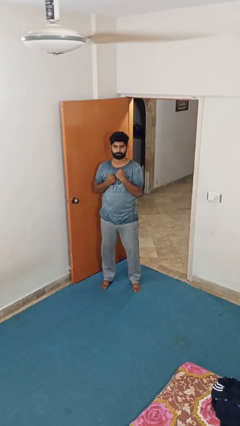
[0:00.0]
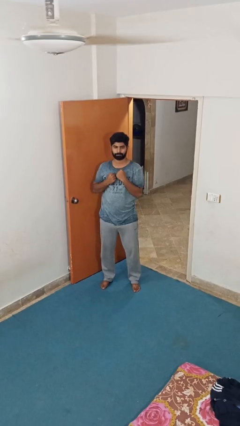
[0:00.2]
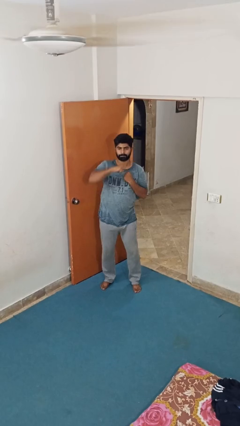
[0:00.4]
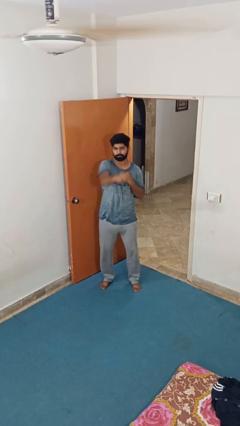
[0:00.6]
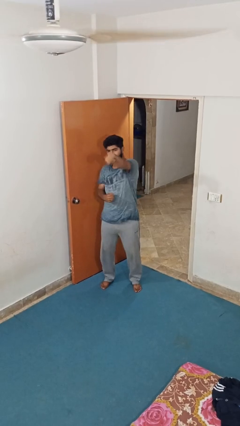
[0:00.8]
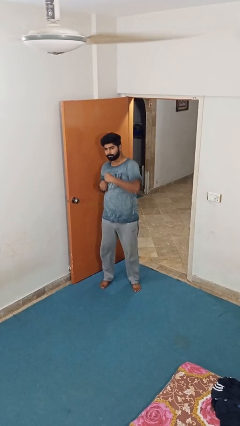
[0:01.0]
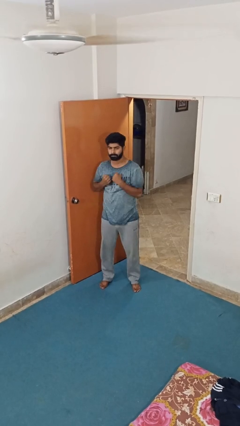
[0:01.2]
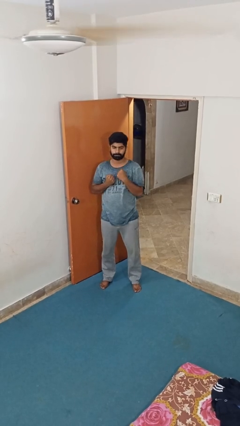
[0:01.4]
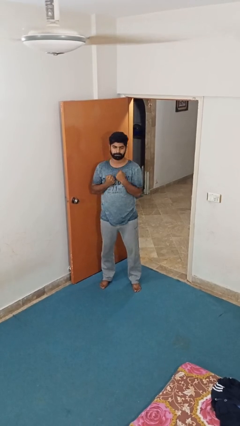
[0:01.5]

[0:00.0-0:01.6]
person punches

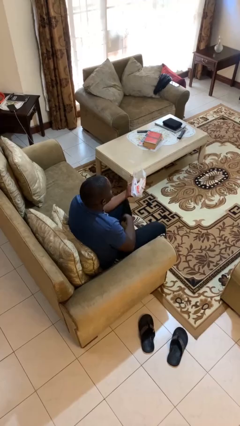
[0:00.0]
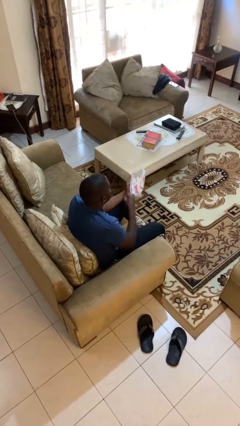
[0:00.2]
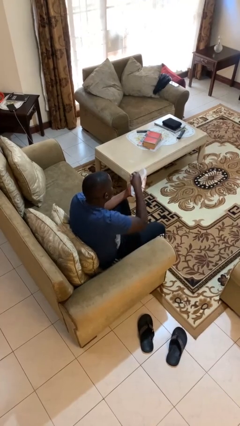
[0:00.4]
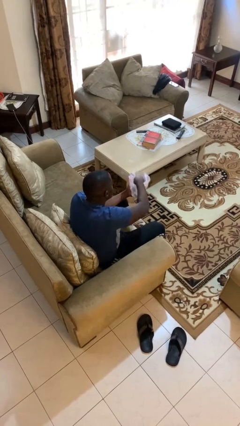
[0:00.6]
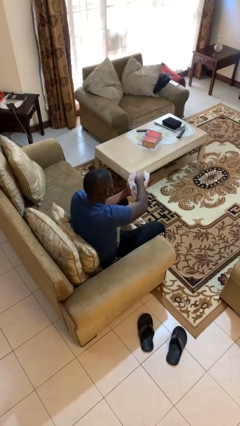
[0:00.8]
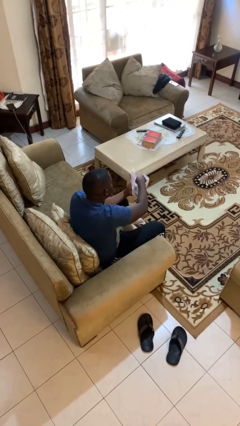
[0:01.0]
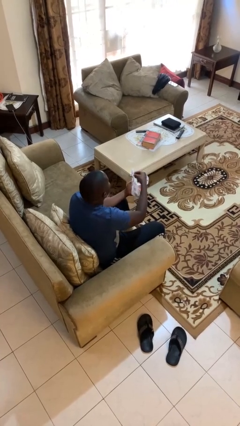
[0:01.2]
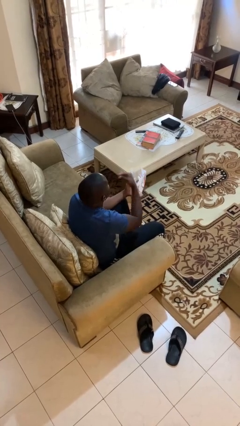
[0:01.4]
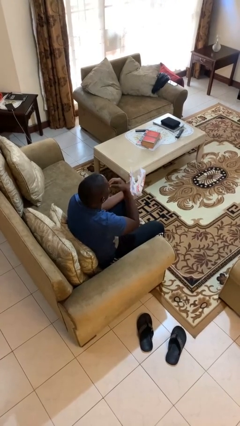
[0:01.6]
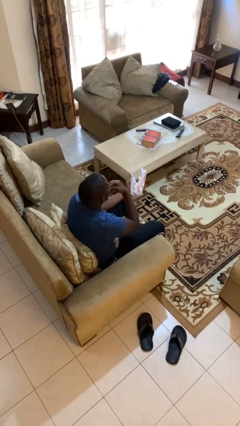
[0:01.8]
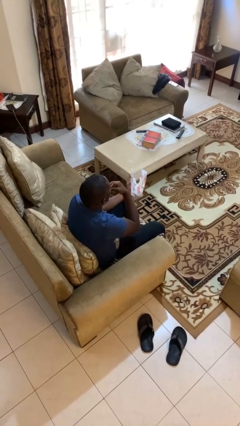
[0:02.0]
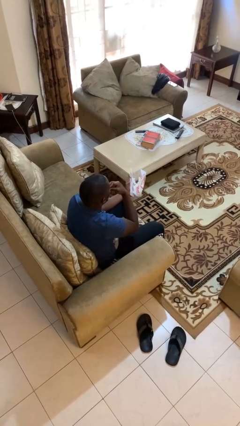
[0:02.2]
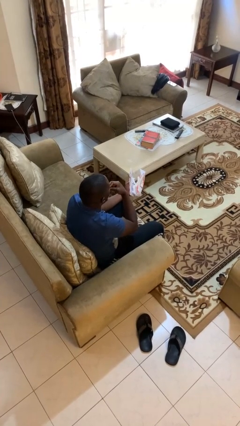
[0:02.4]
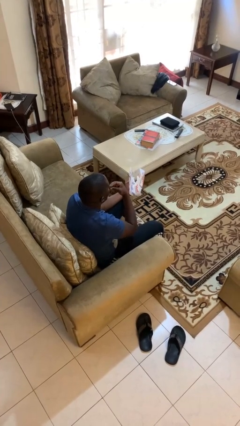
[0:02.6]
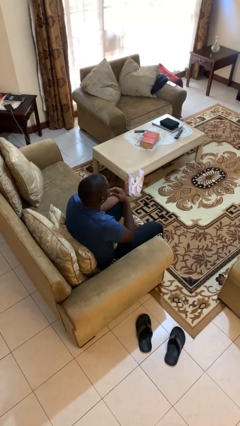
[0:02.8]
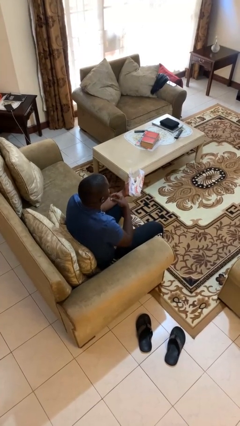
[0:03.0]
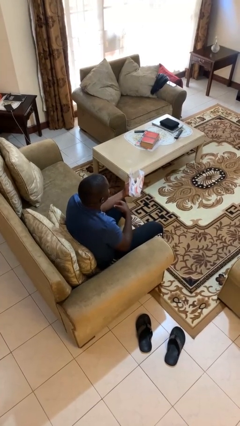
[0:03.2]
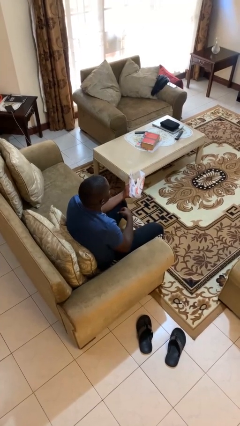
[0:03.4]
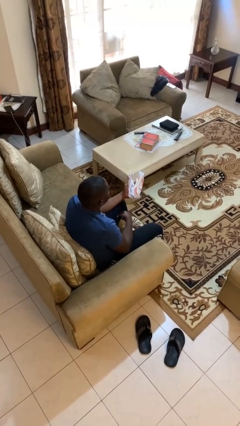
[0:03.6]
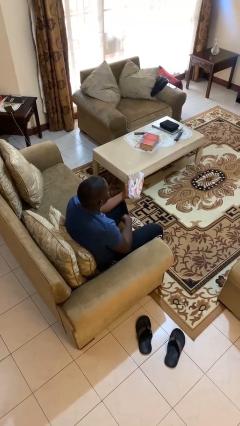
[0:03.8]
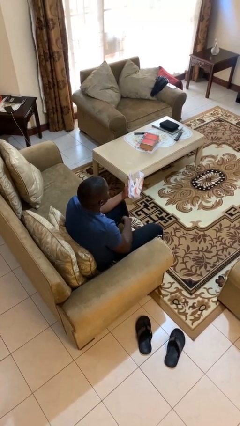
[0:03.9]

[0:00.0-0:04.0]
person eats snack from bag

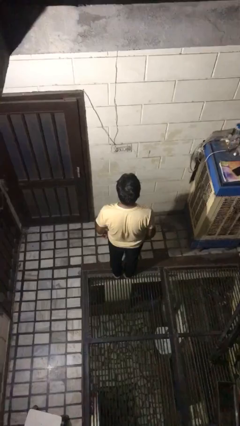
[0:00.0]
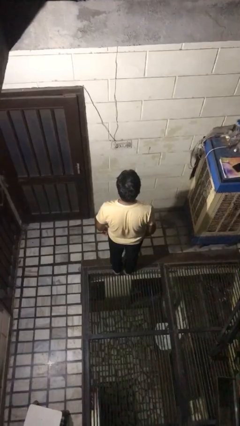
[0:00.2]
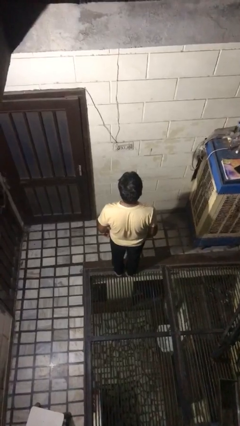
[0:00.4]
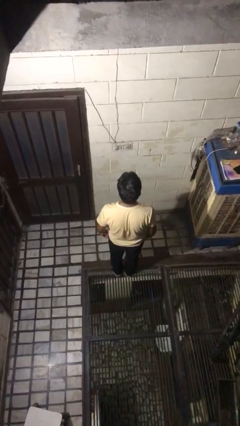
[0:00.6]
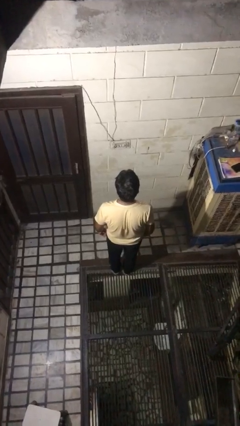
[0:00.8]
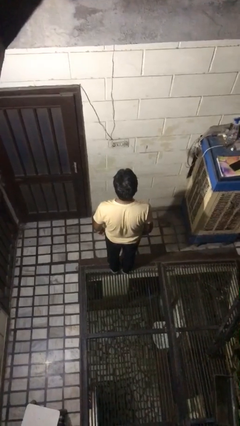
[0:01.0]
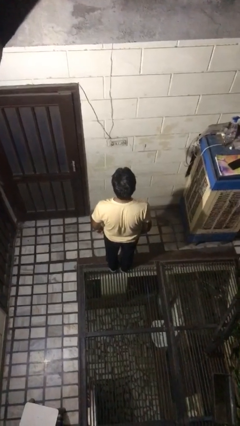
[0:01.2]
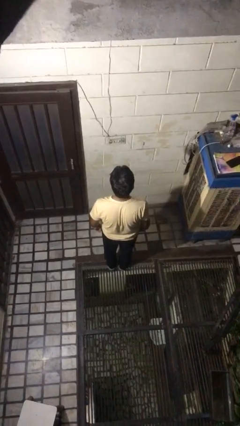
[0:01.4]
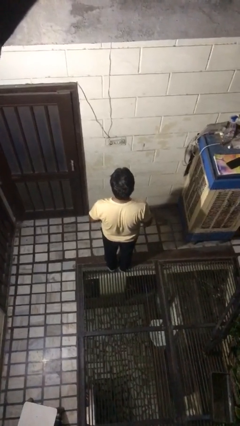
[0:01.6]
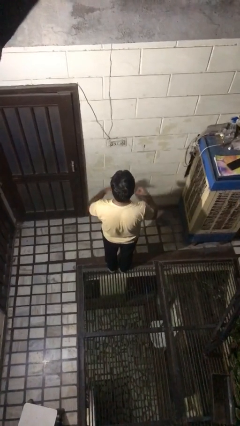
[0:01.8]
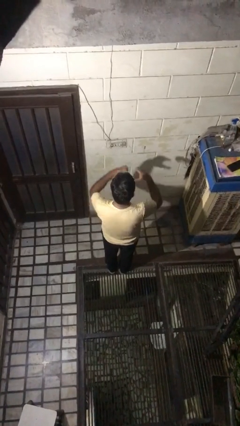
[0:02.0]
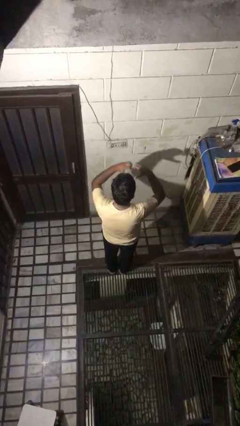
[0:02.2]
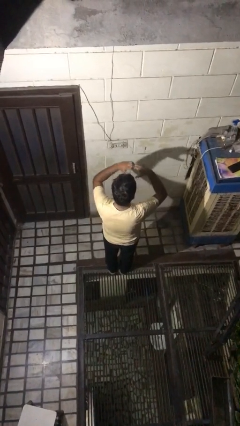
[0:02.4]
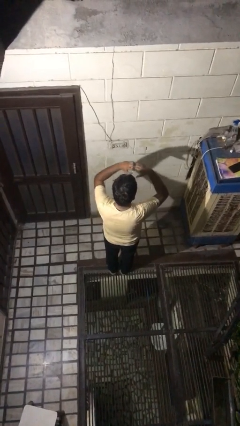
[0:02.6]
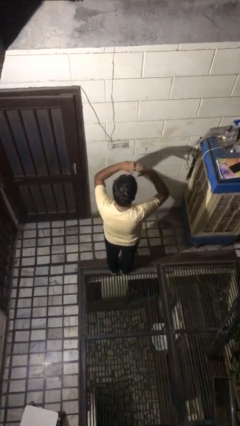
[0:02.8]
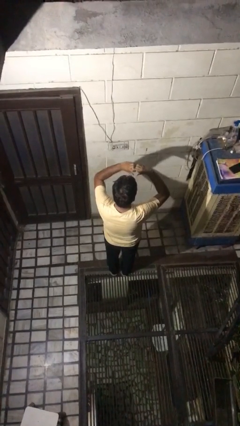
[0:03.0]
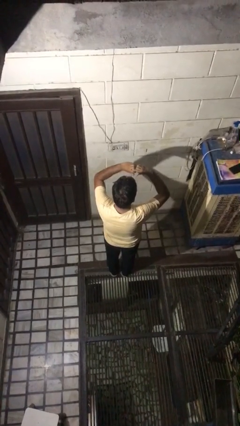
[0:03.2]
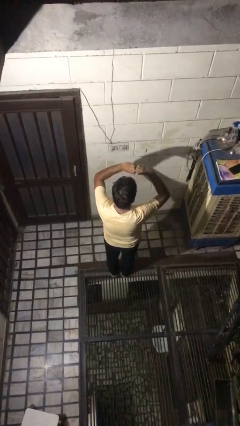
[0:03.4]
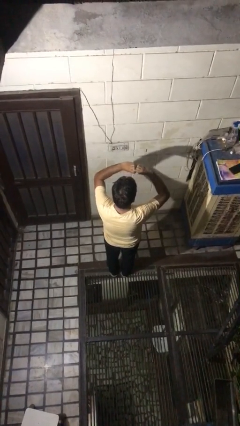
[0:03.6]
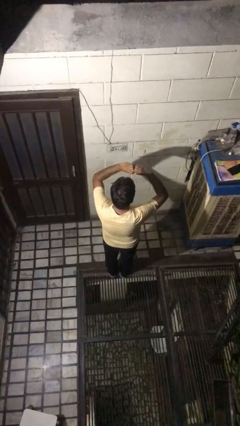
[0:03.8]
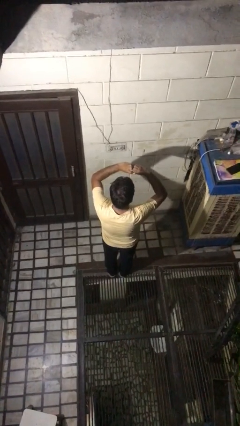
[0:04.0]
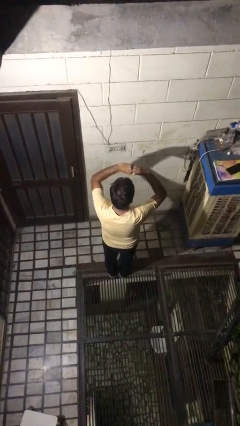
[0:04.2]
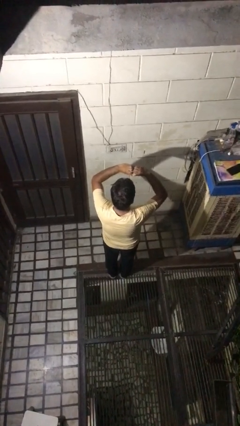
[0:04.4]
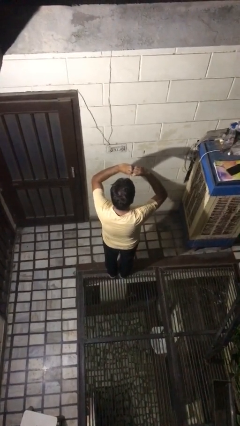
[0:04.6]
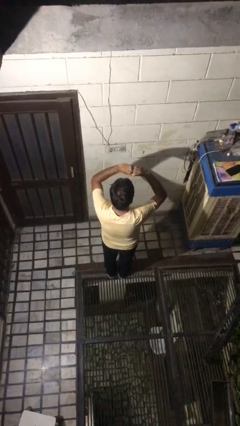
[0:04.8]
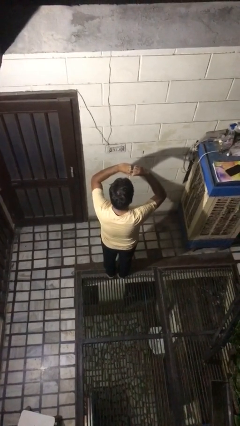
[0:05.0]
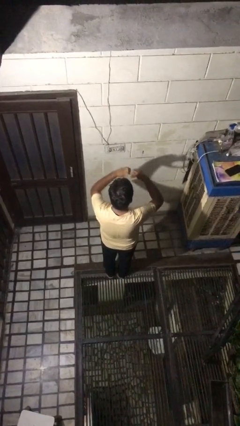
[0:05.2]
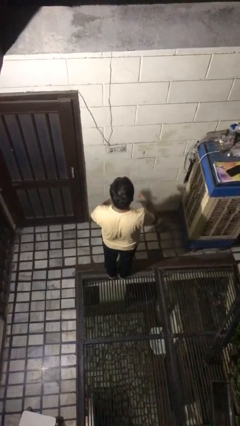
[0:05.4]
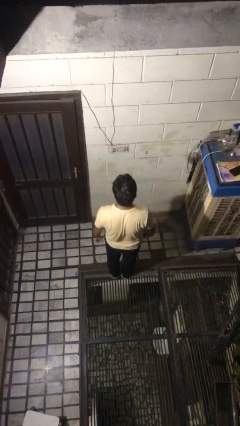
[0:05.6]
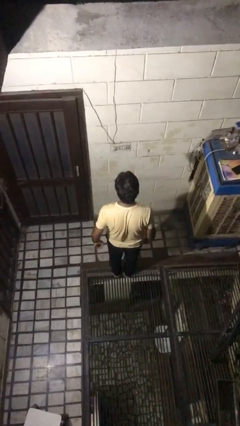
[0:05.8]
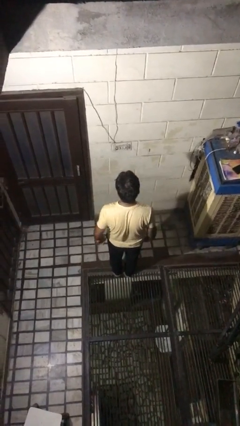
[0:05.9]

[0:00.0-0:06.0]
person gestures heart

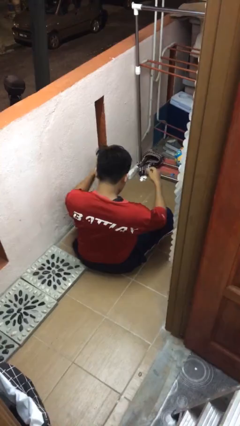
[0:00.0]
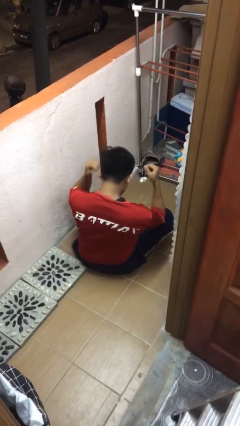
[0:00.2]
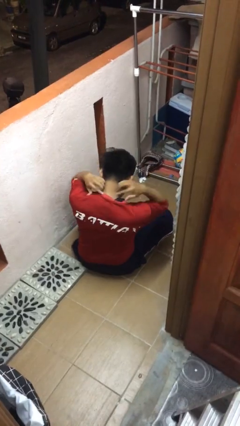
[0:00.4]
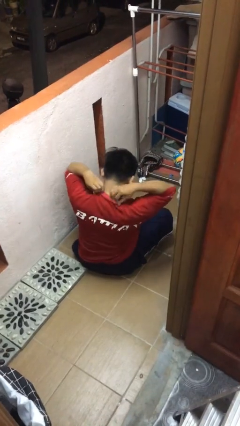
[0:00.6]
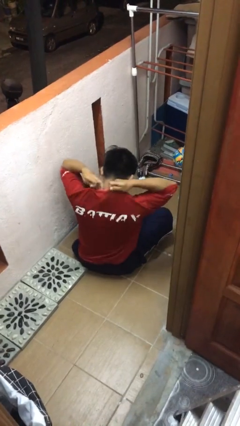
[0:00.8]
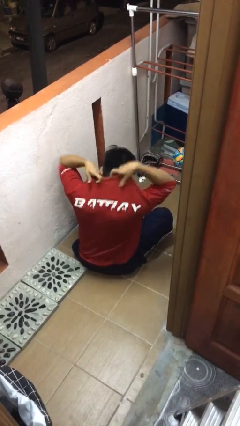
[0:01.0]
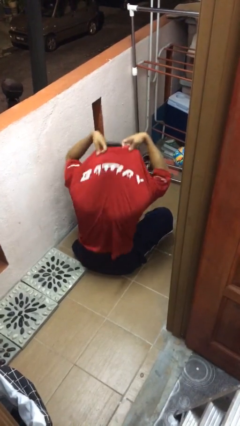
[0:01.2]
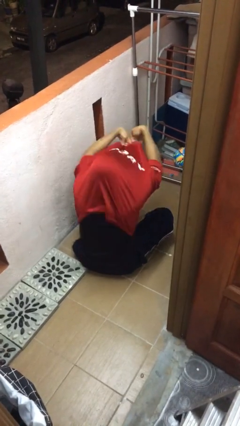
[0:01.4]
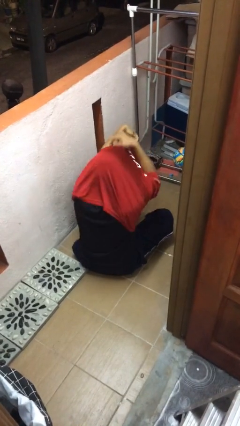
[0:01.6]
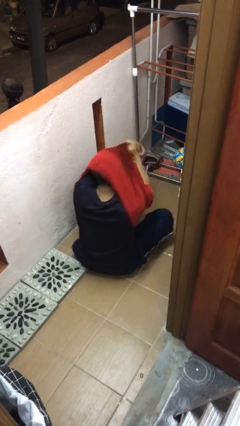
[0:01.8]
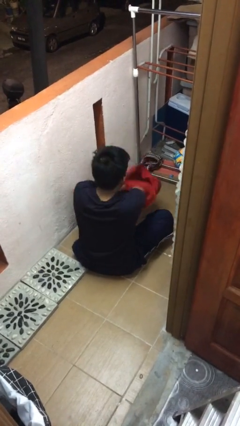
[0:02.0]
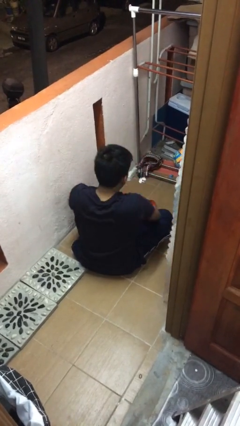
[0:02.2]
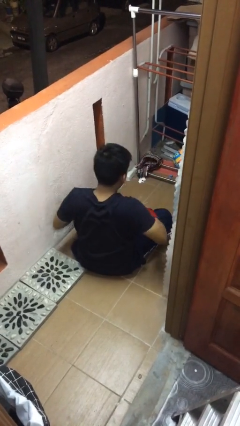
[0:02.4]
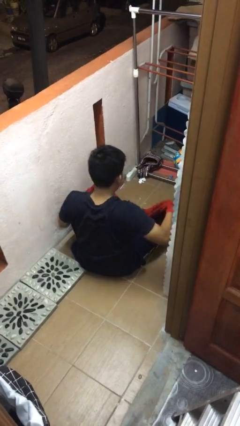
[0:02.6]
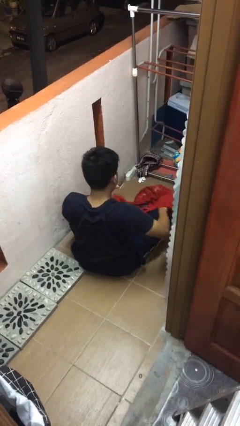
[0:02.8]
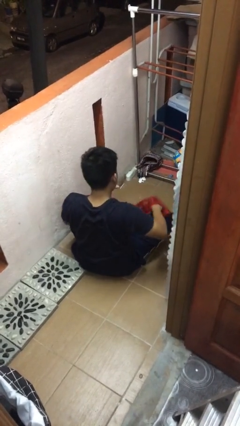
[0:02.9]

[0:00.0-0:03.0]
person takes off shirt

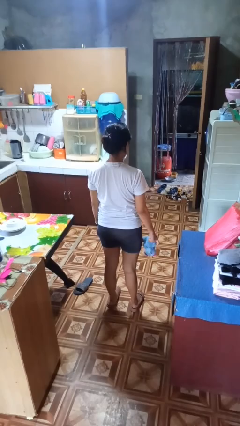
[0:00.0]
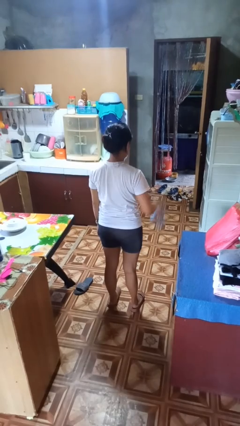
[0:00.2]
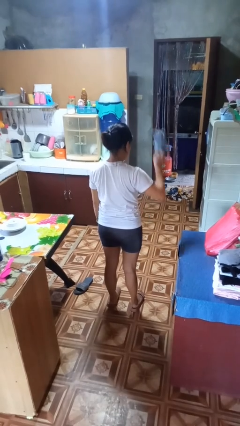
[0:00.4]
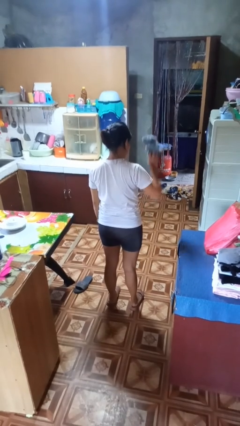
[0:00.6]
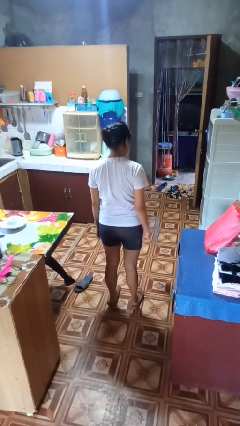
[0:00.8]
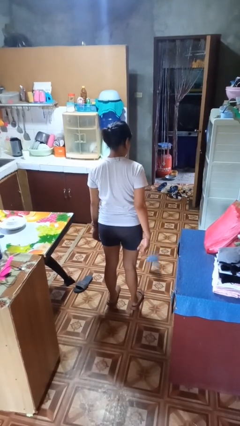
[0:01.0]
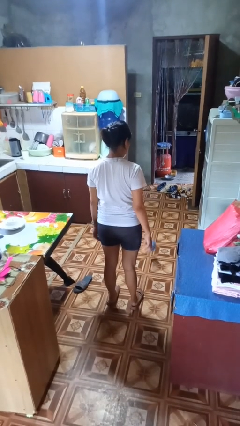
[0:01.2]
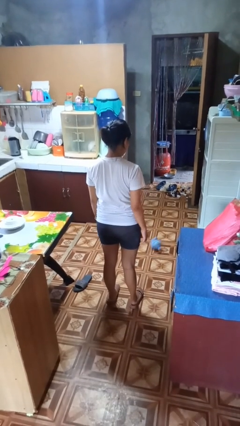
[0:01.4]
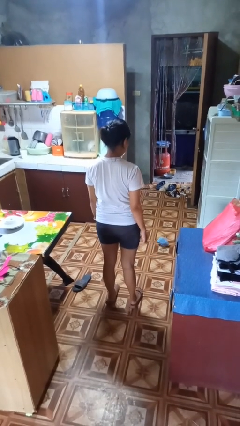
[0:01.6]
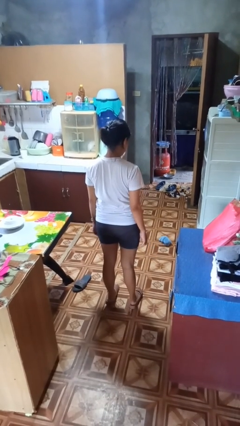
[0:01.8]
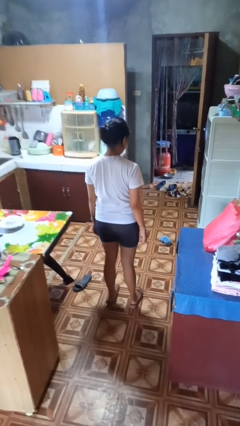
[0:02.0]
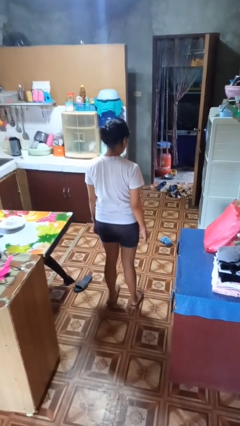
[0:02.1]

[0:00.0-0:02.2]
person throws object to ground

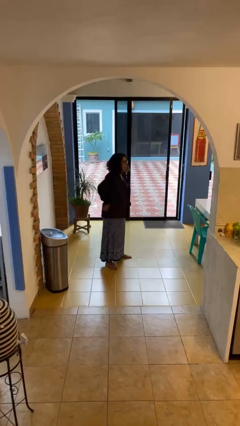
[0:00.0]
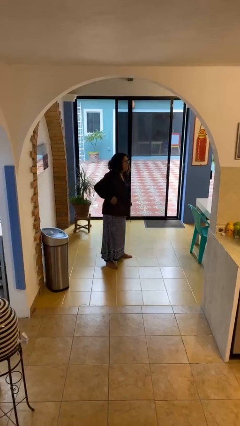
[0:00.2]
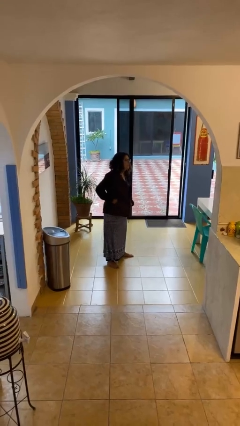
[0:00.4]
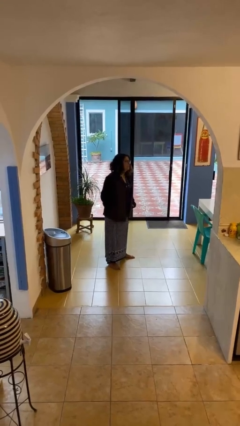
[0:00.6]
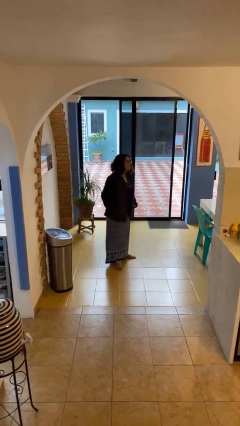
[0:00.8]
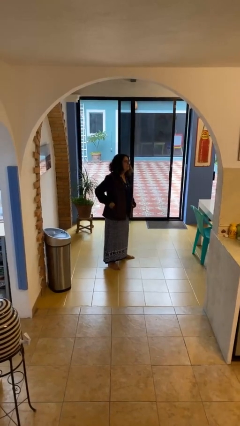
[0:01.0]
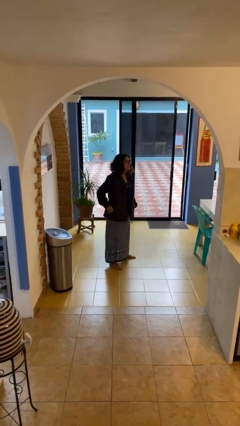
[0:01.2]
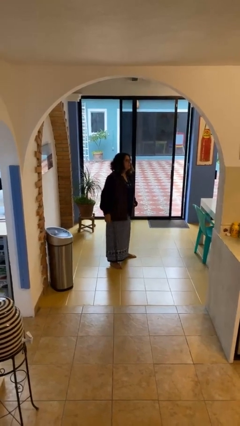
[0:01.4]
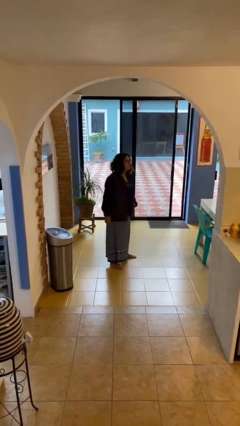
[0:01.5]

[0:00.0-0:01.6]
person puts phone into pocket
